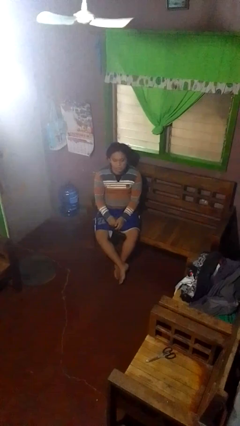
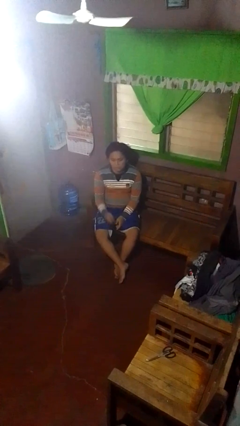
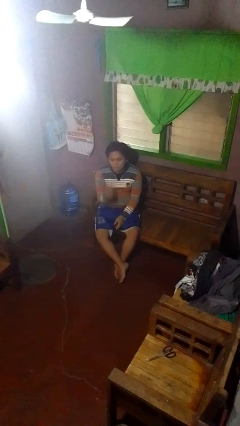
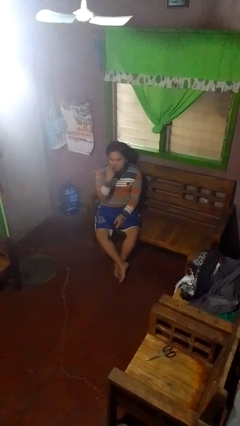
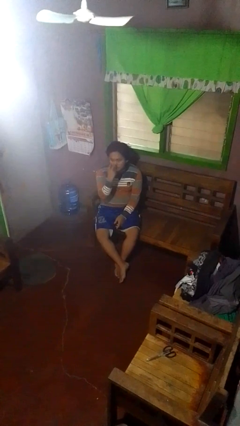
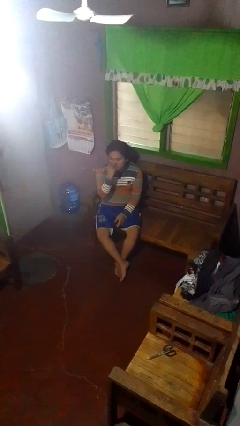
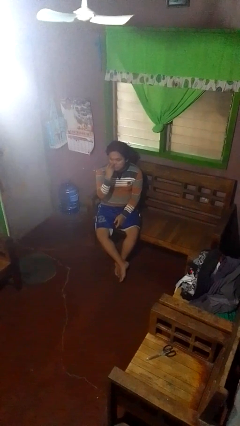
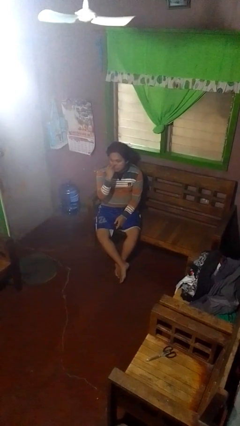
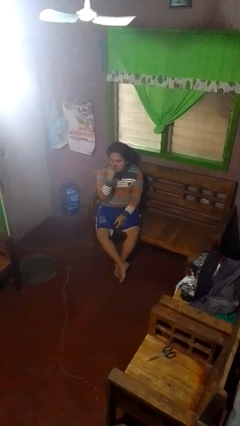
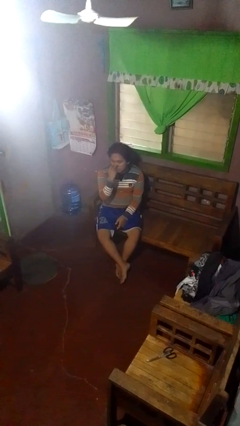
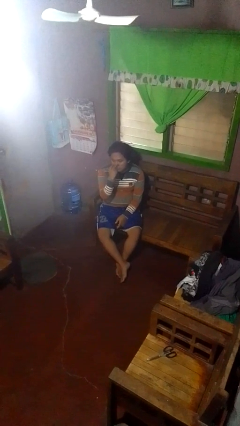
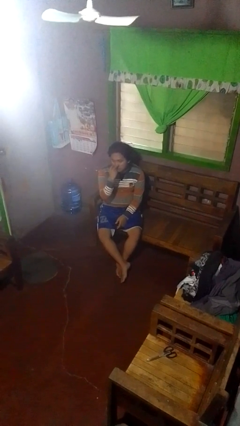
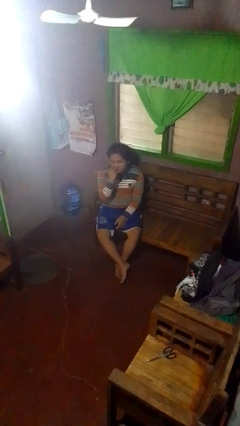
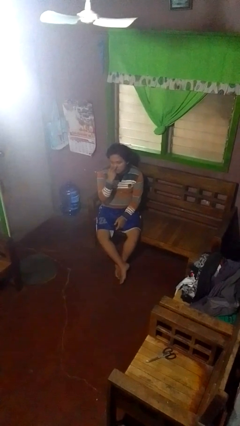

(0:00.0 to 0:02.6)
person gestures watch closely

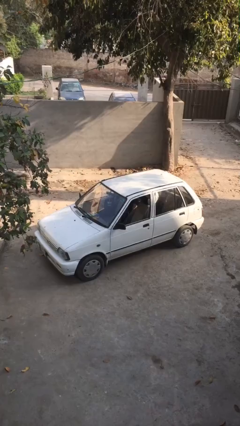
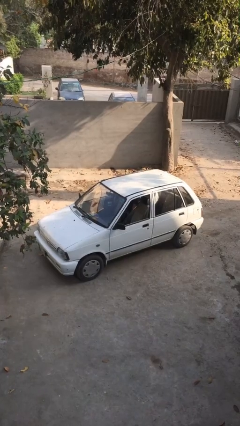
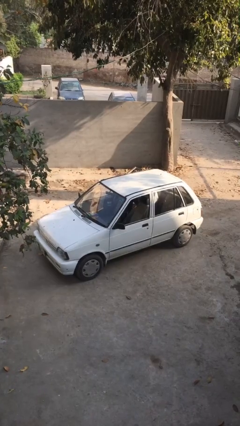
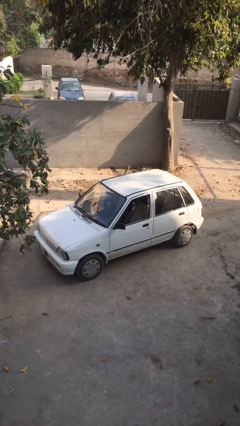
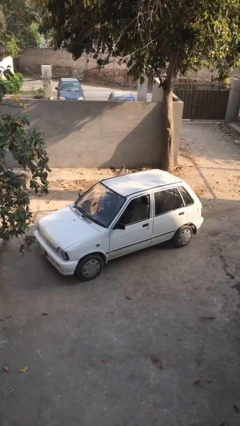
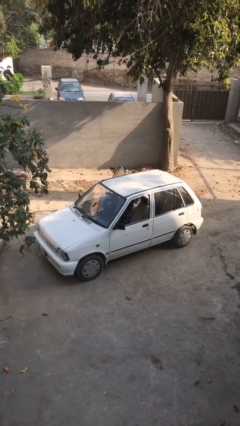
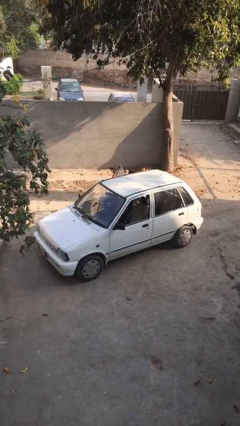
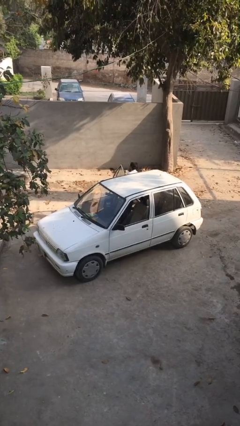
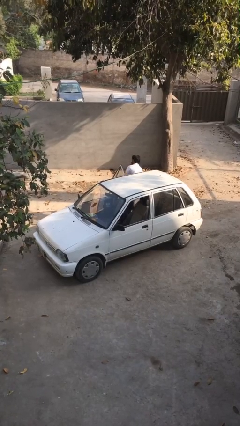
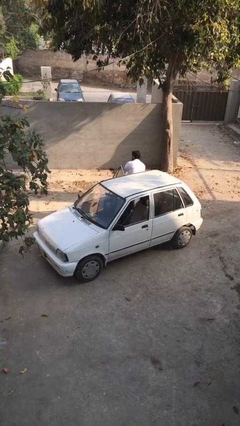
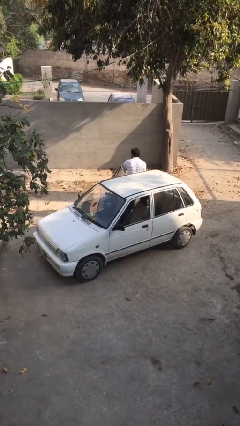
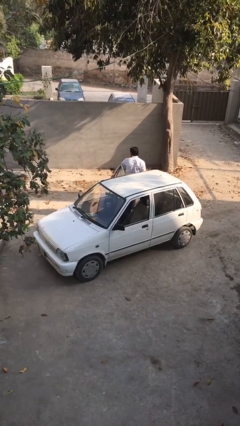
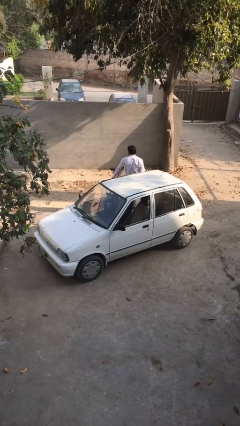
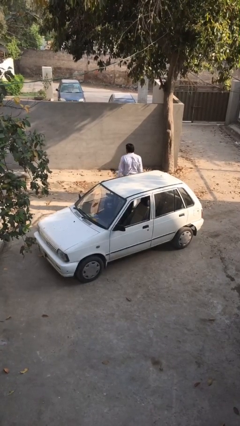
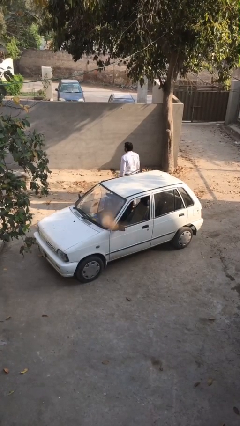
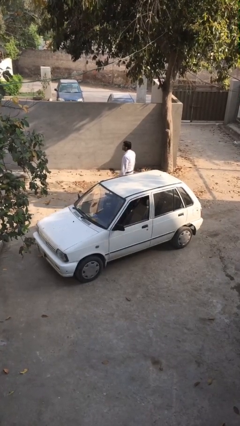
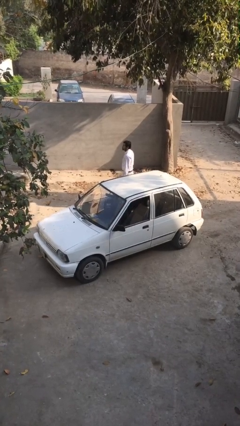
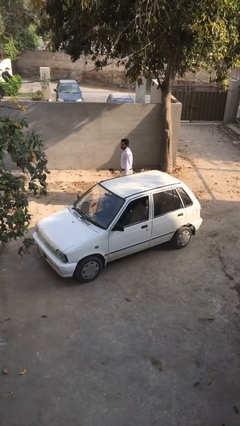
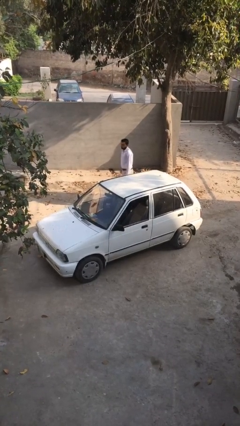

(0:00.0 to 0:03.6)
car drops off person

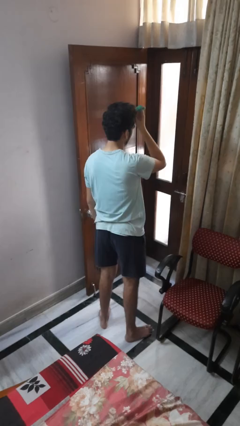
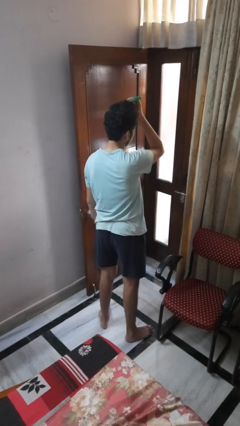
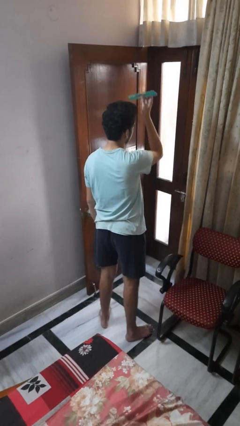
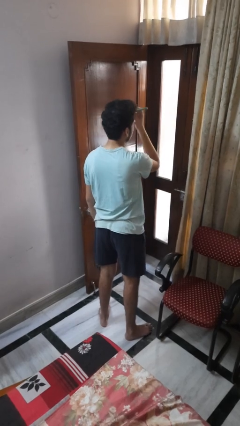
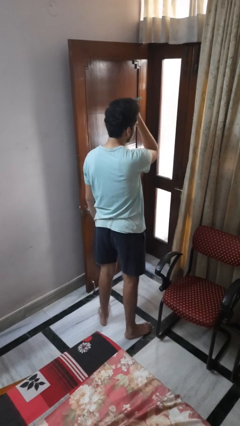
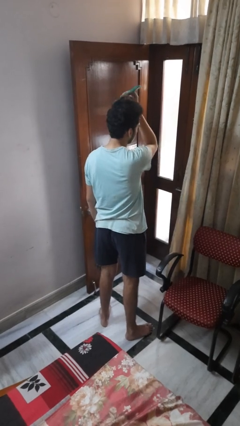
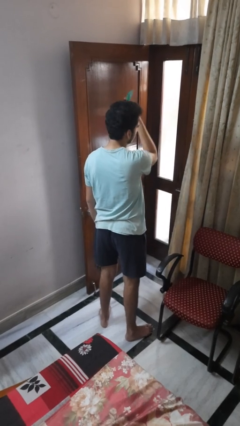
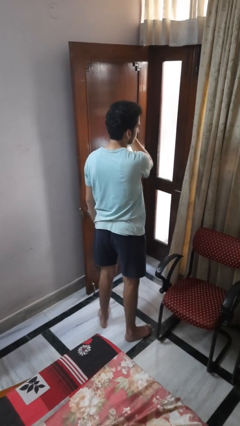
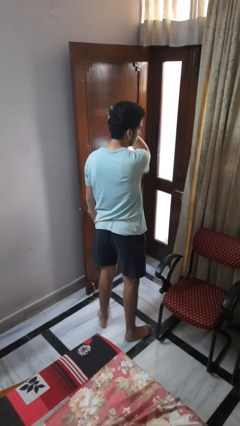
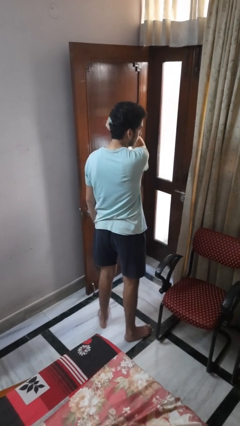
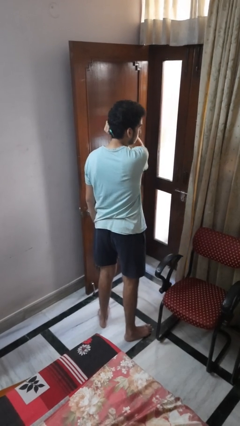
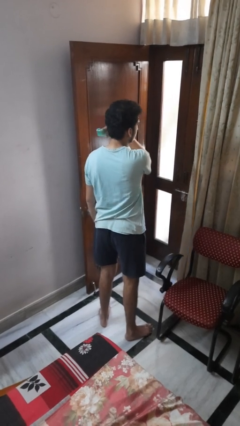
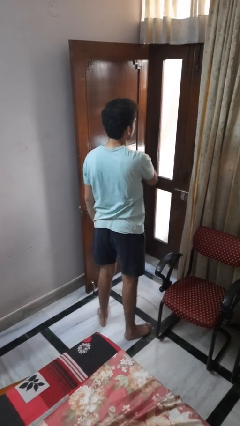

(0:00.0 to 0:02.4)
person brushes hair

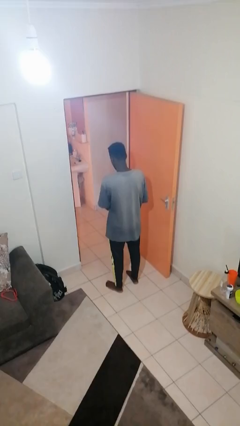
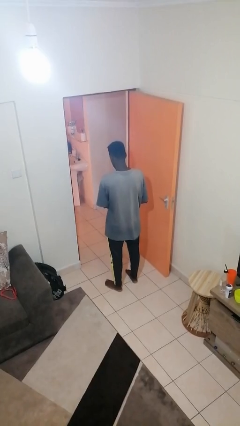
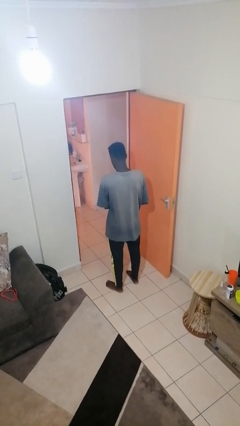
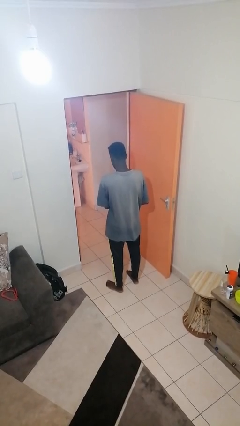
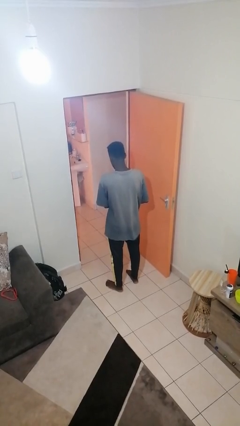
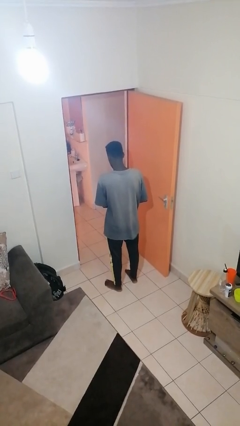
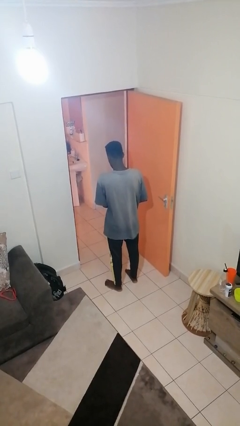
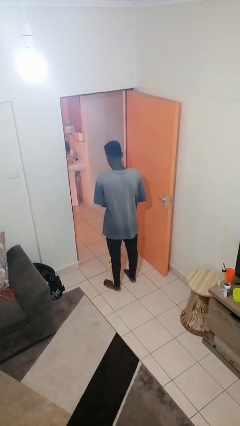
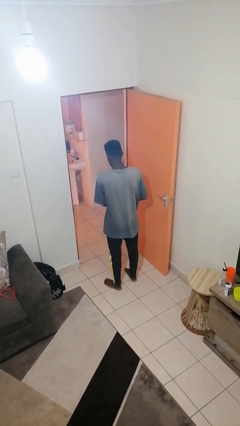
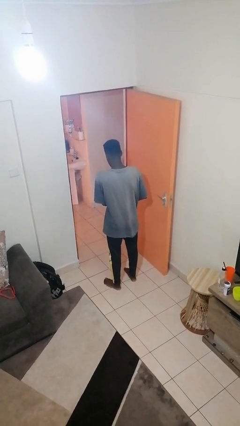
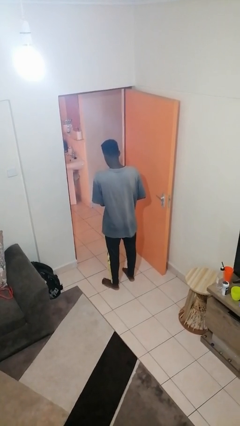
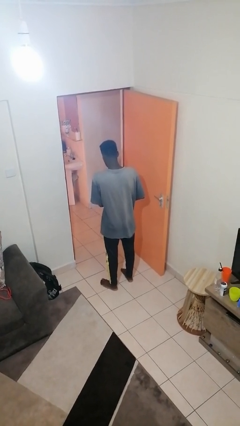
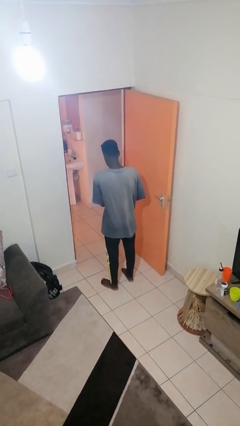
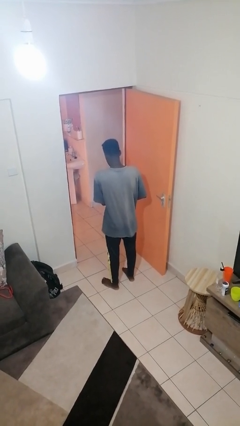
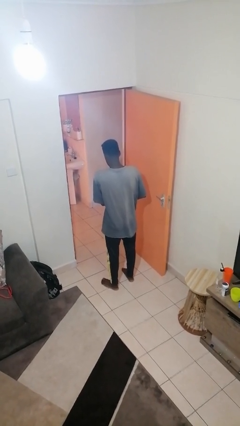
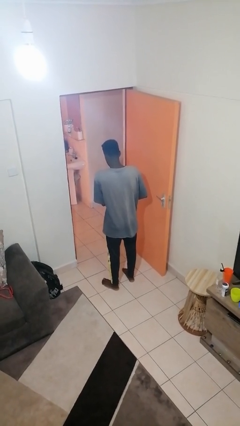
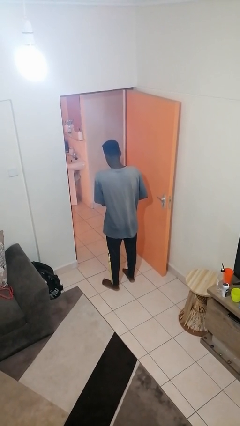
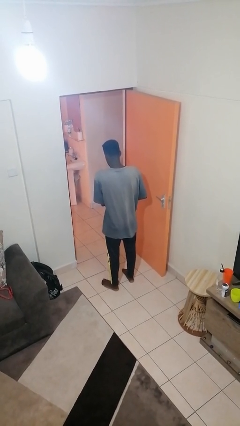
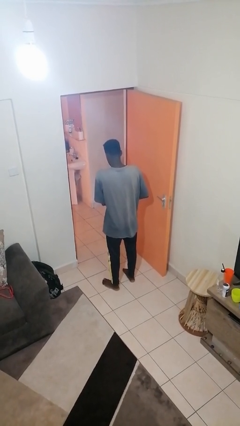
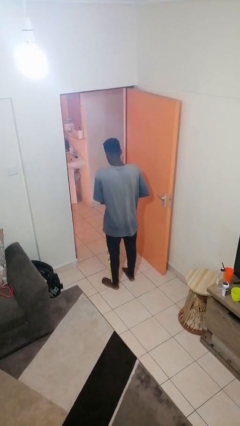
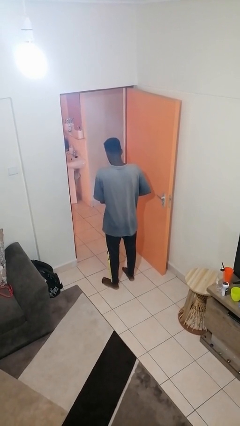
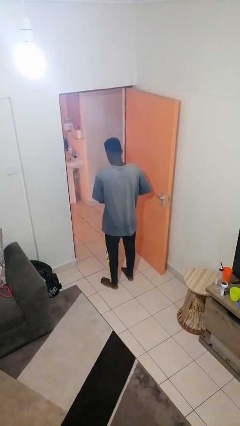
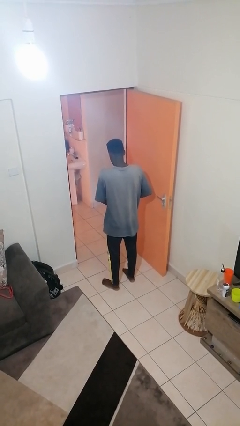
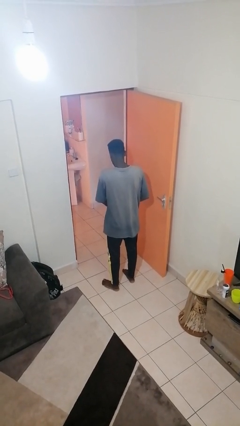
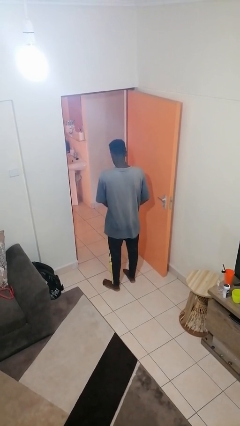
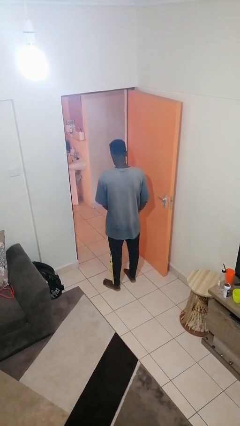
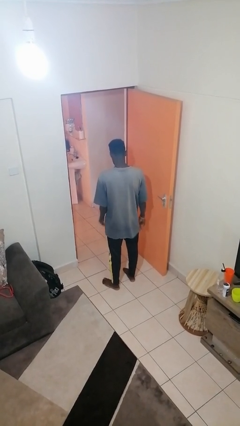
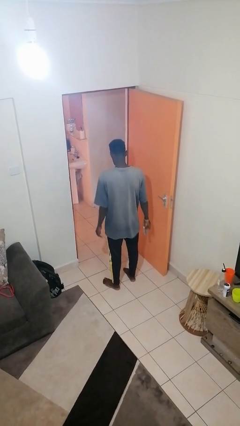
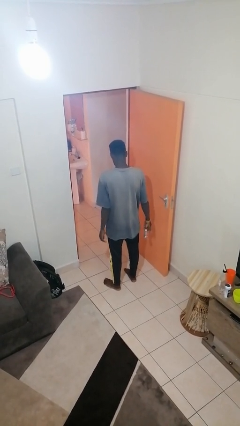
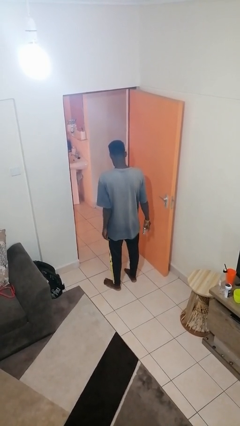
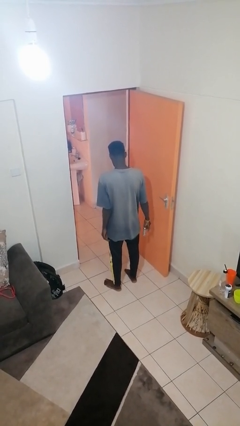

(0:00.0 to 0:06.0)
person takes off wristwatch

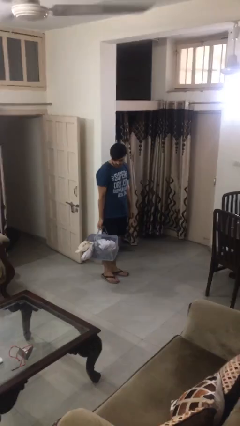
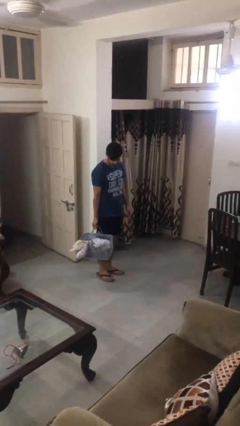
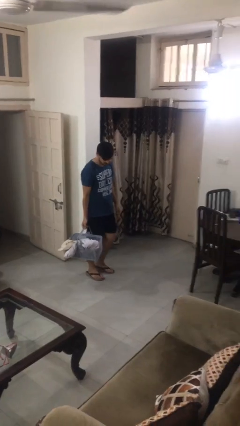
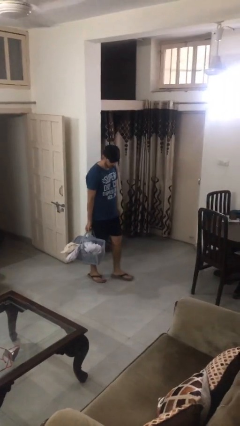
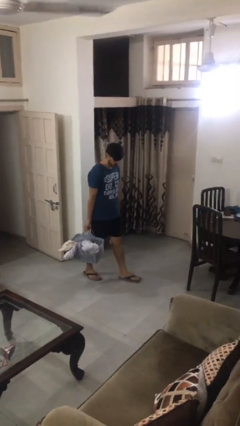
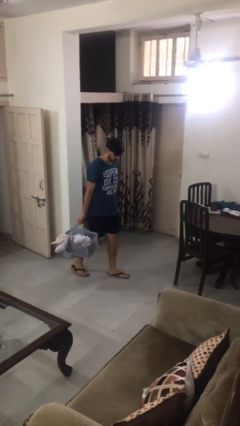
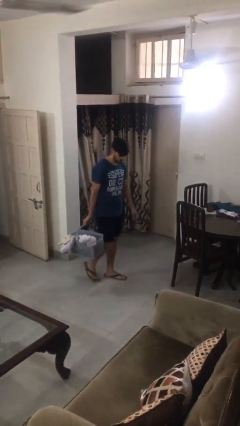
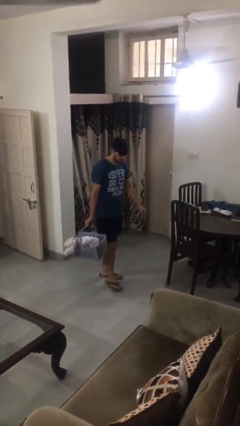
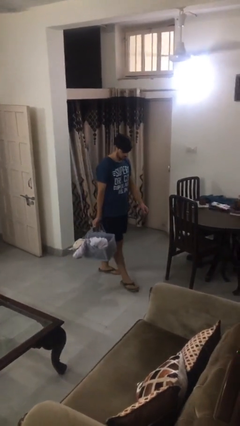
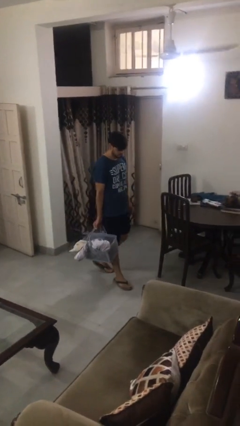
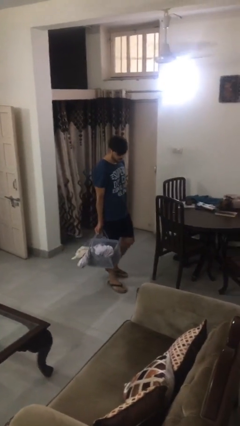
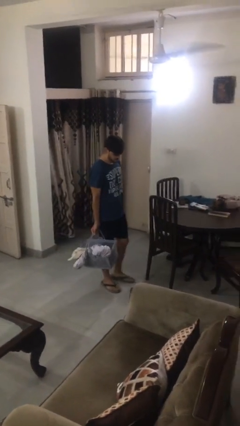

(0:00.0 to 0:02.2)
person carries laundry basket

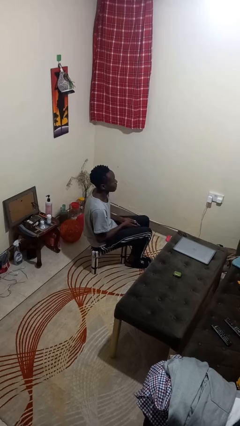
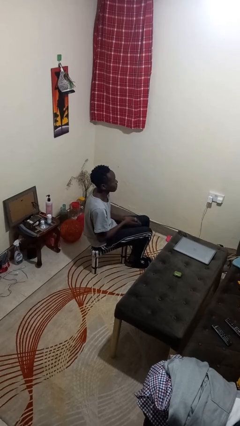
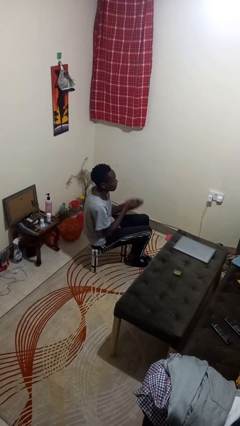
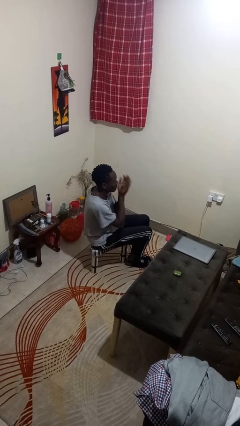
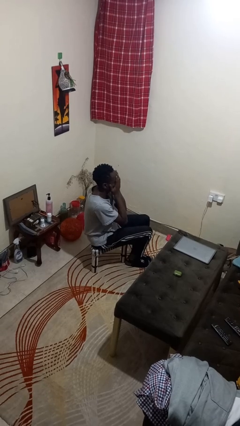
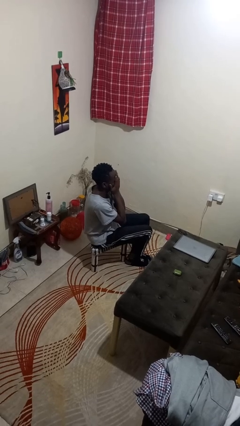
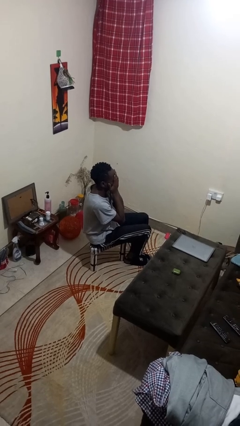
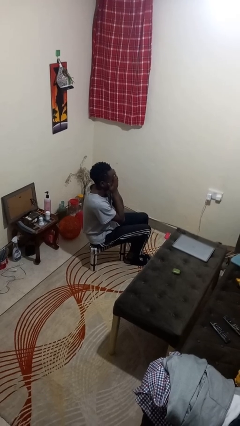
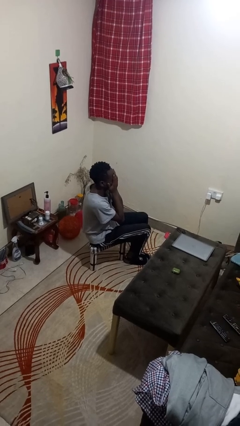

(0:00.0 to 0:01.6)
person covers face with hands
